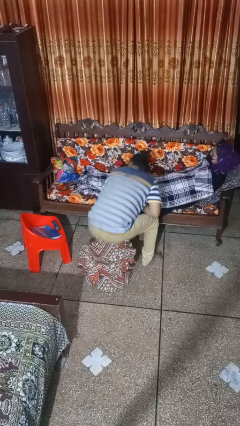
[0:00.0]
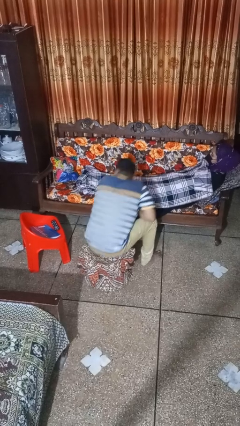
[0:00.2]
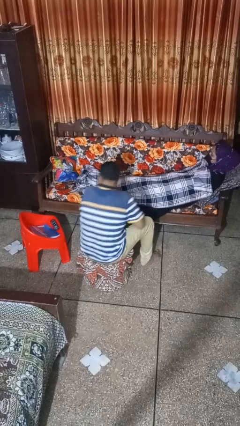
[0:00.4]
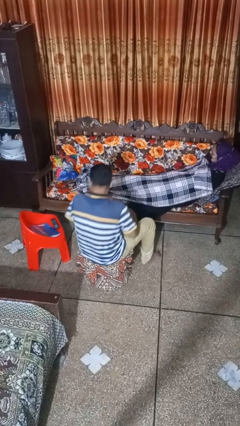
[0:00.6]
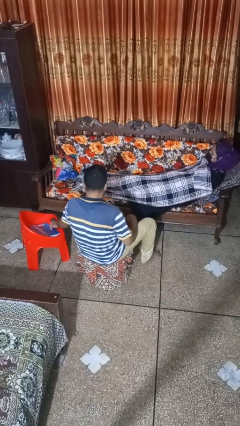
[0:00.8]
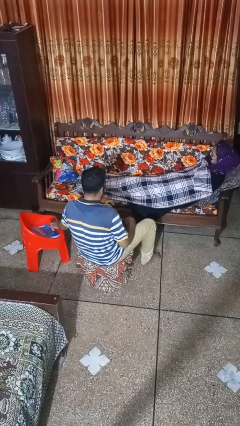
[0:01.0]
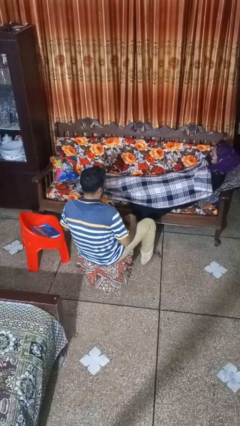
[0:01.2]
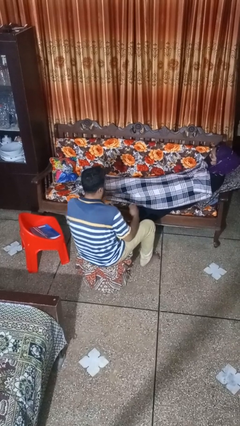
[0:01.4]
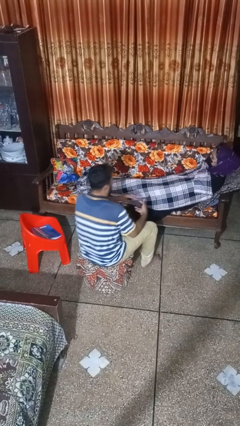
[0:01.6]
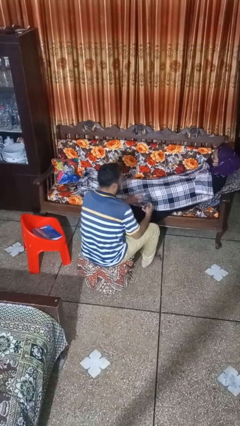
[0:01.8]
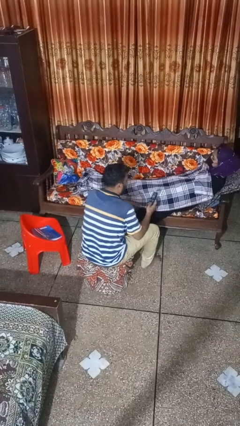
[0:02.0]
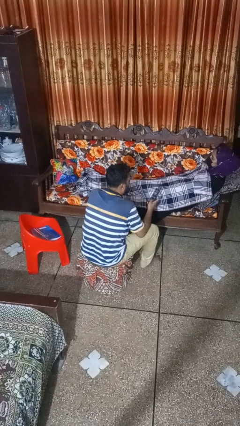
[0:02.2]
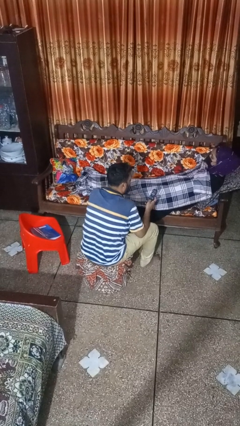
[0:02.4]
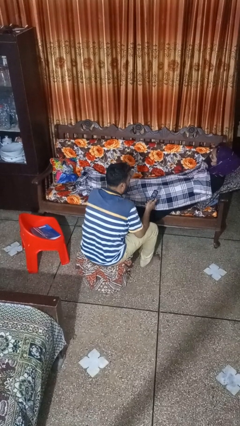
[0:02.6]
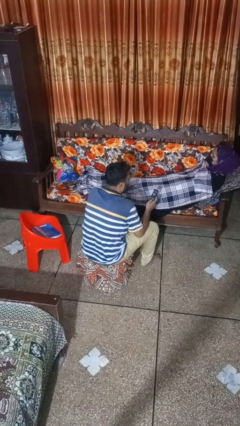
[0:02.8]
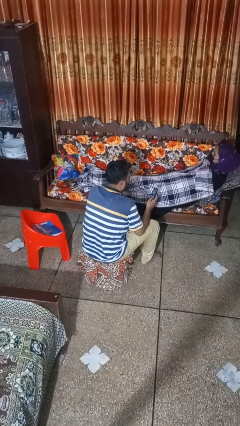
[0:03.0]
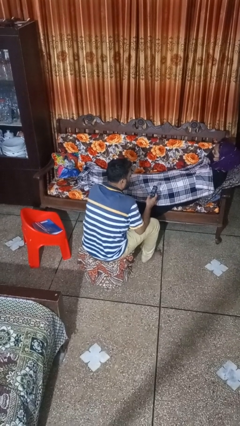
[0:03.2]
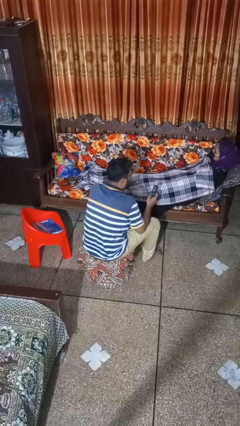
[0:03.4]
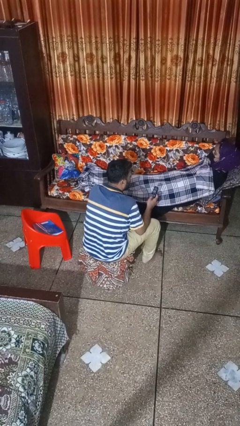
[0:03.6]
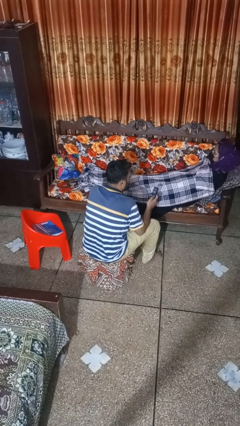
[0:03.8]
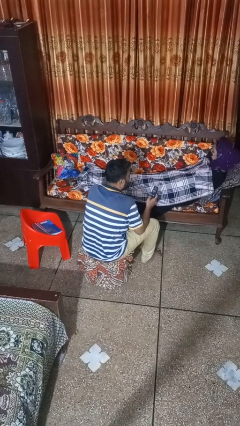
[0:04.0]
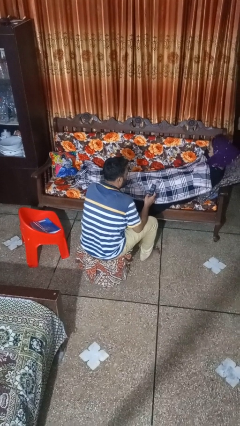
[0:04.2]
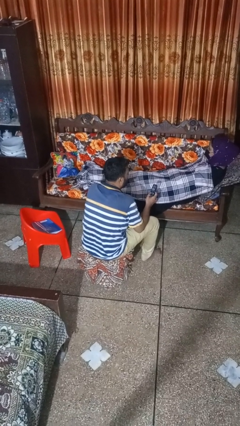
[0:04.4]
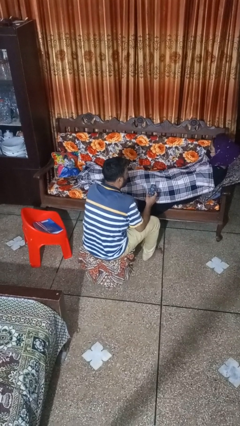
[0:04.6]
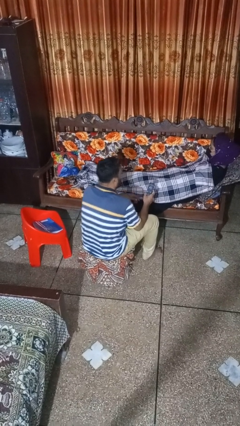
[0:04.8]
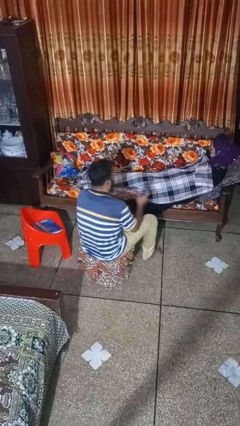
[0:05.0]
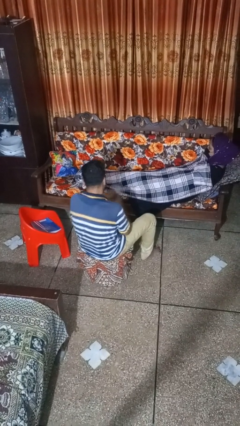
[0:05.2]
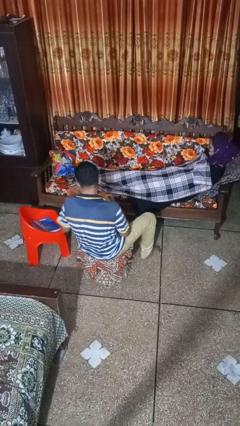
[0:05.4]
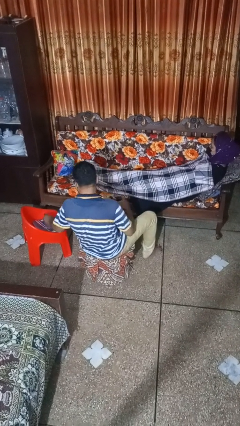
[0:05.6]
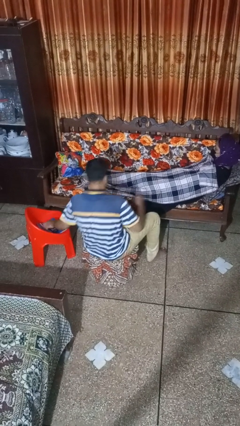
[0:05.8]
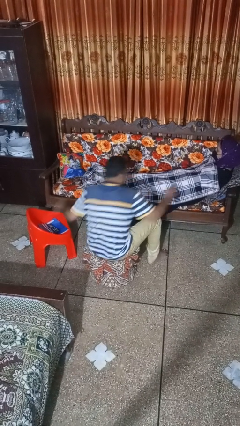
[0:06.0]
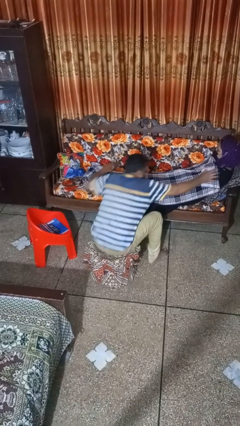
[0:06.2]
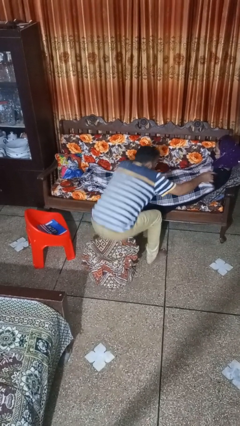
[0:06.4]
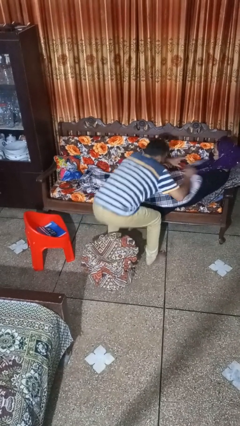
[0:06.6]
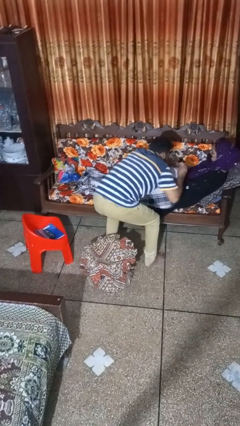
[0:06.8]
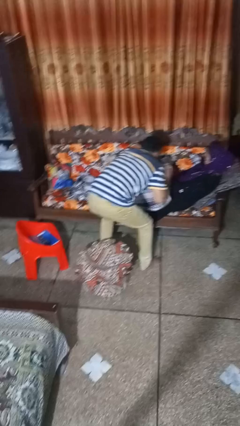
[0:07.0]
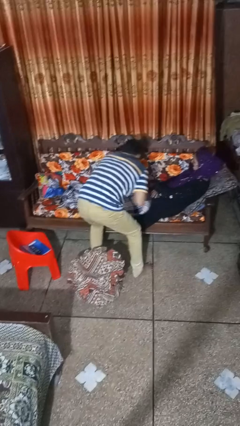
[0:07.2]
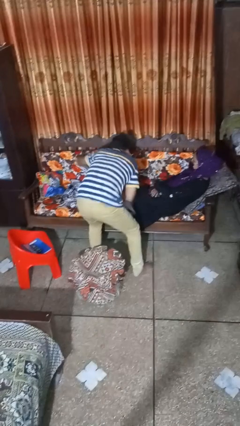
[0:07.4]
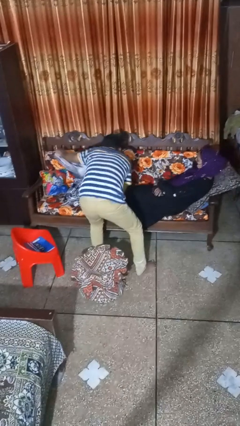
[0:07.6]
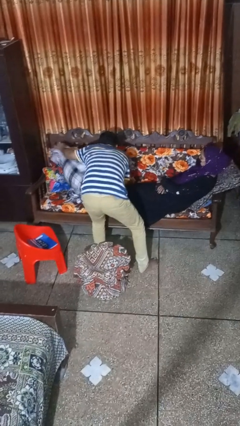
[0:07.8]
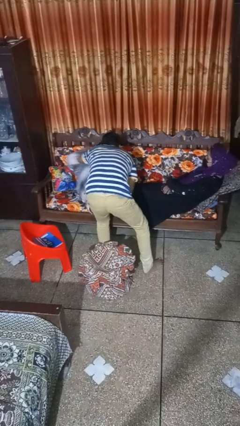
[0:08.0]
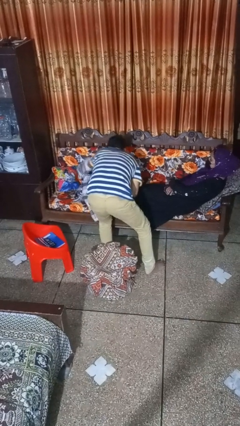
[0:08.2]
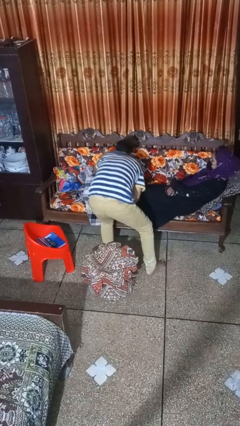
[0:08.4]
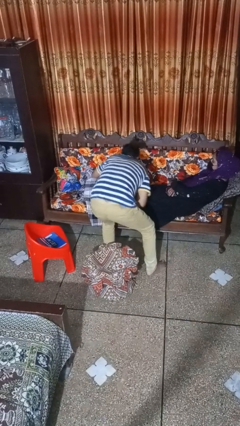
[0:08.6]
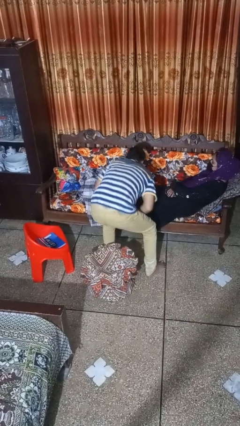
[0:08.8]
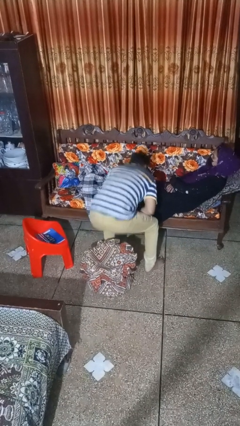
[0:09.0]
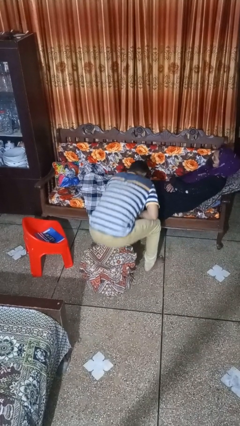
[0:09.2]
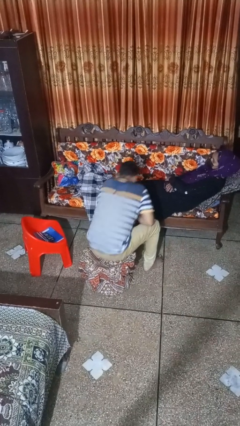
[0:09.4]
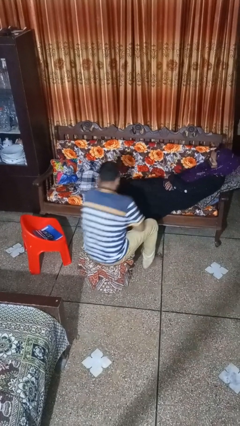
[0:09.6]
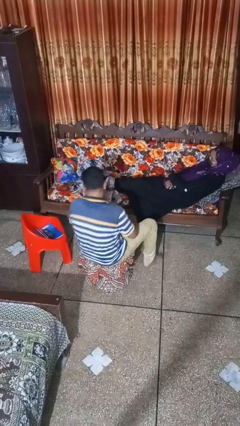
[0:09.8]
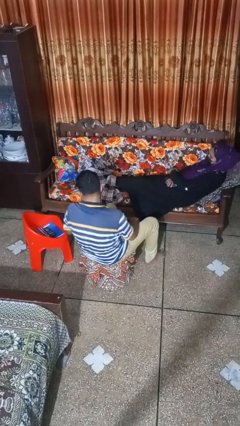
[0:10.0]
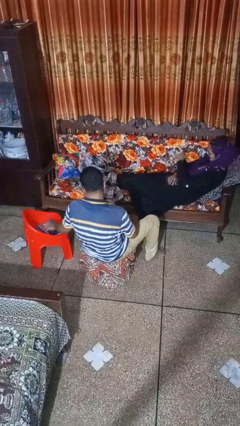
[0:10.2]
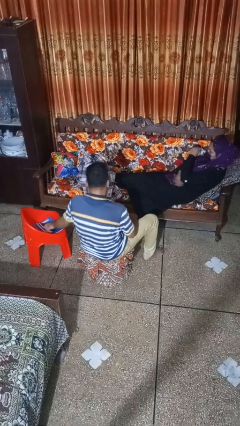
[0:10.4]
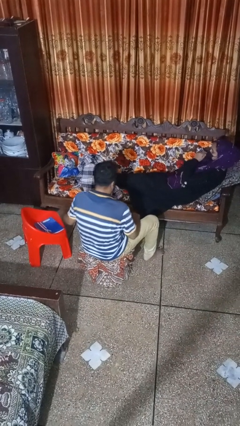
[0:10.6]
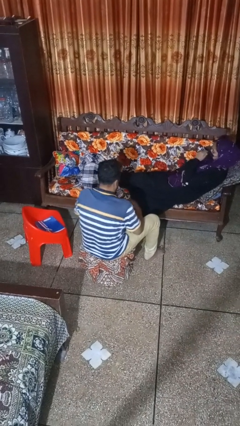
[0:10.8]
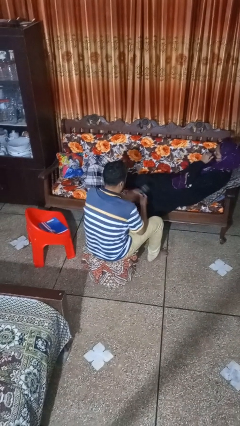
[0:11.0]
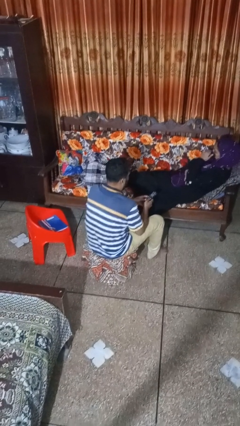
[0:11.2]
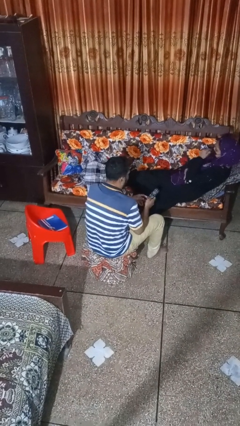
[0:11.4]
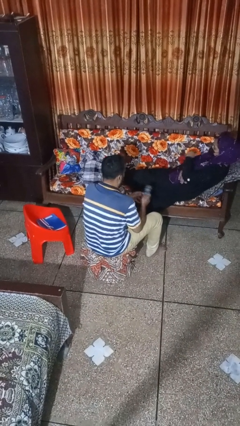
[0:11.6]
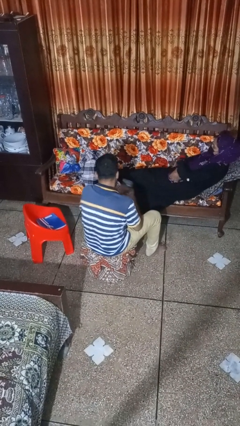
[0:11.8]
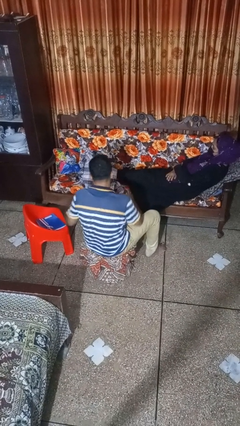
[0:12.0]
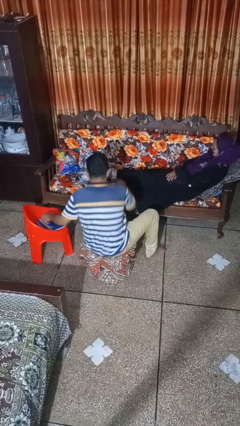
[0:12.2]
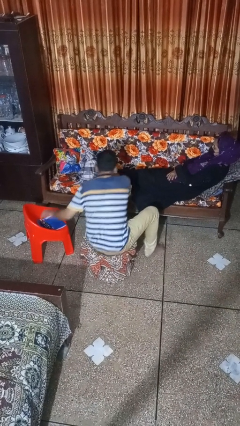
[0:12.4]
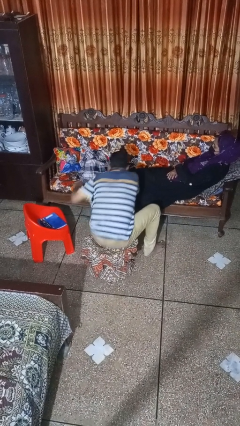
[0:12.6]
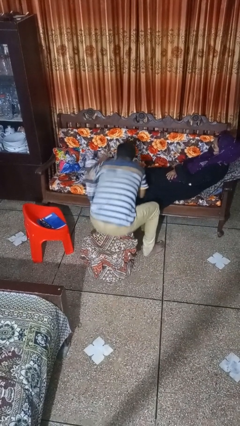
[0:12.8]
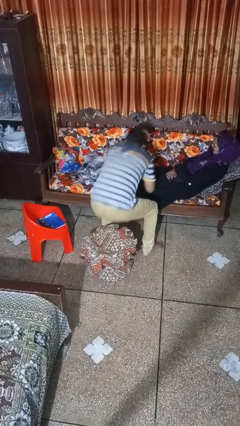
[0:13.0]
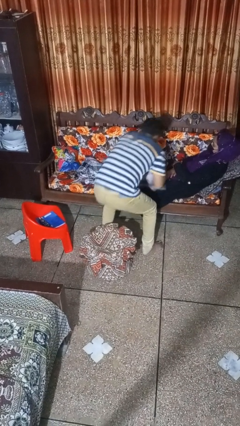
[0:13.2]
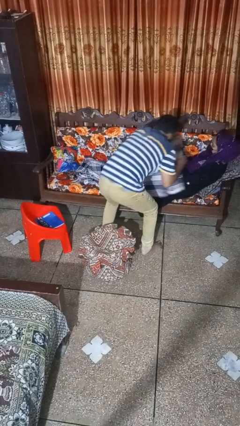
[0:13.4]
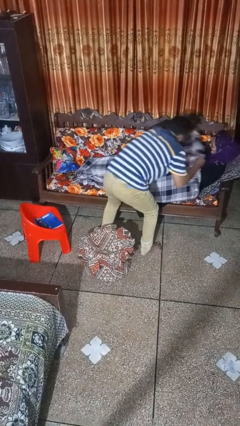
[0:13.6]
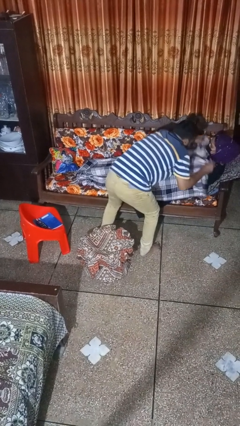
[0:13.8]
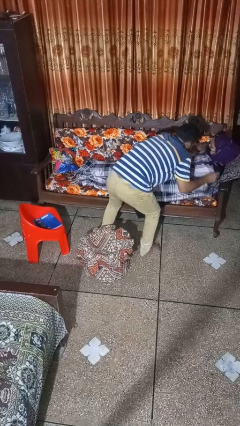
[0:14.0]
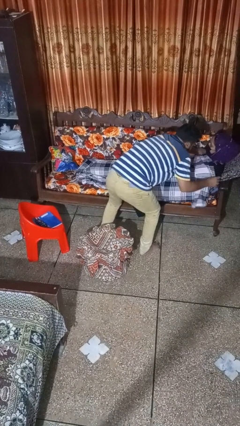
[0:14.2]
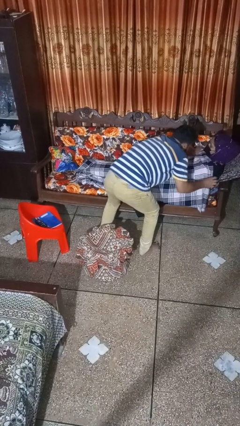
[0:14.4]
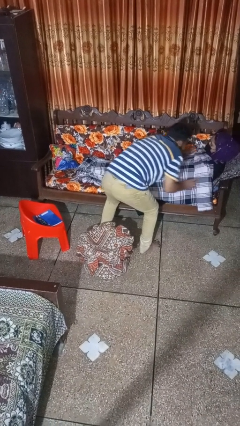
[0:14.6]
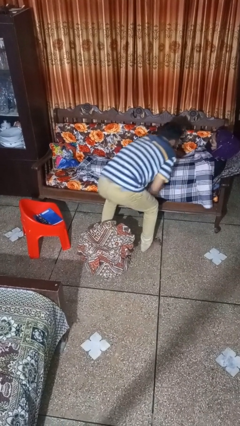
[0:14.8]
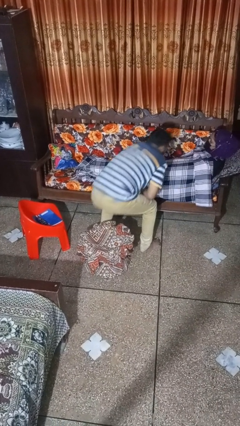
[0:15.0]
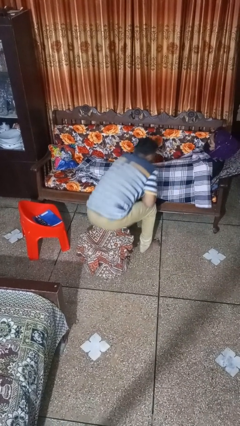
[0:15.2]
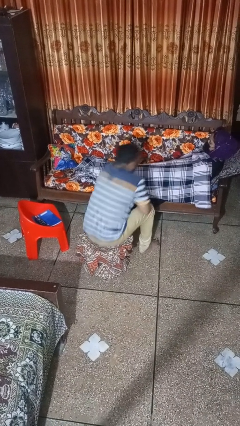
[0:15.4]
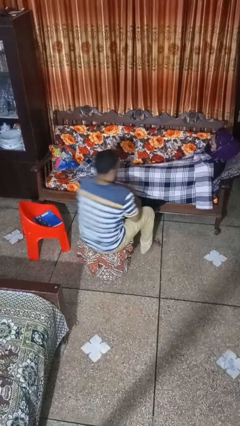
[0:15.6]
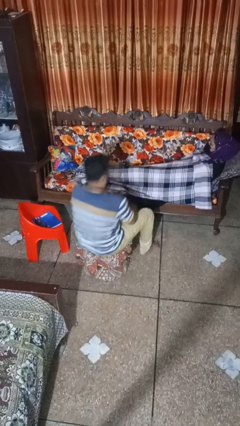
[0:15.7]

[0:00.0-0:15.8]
person uncovers friend with blanket

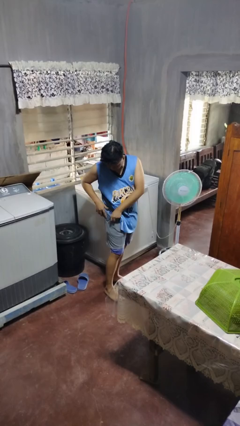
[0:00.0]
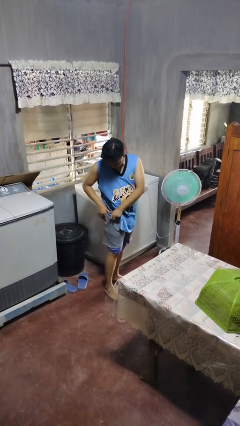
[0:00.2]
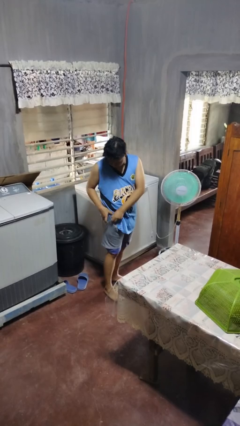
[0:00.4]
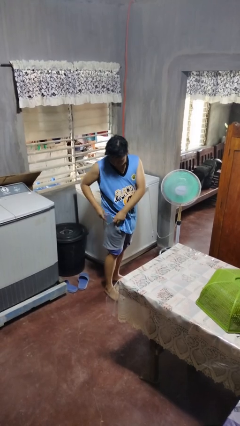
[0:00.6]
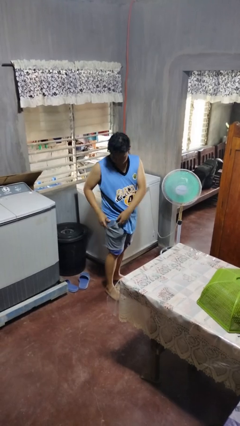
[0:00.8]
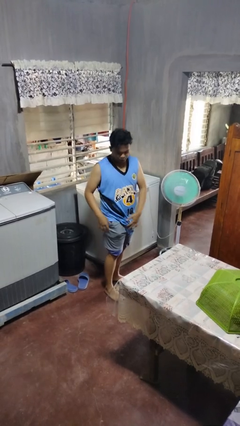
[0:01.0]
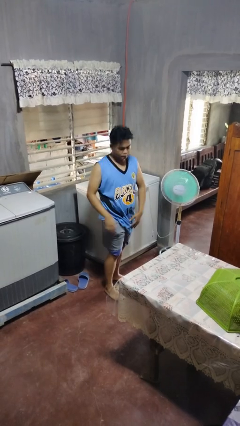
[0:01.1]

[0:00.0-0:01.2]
person puts phone into pocket

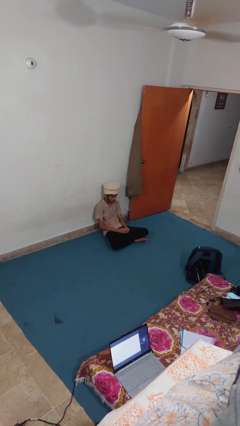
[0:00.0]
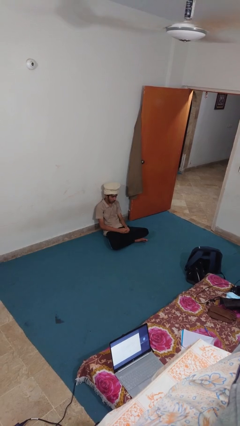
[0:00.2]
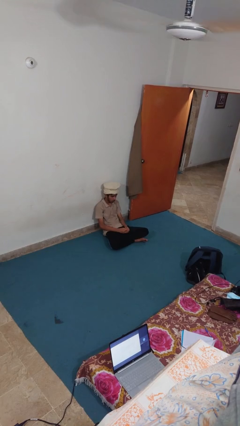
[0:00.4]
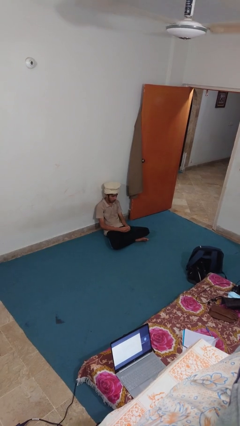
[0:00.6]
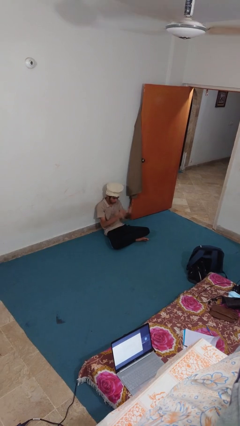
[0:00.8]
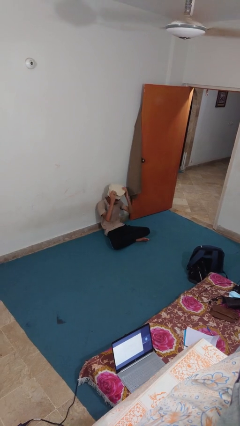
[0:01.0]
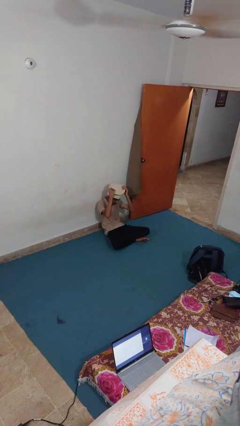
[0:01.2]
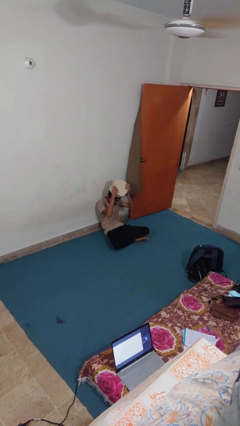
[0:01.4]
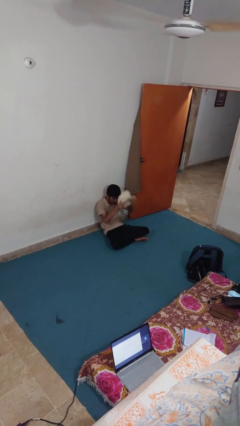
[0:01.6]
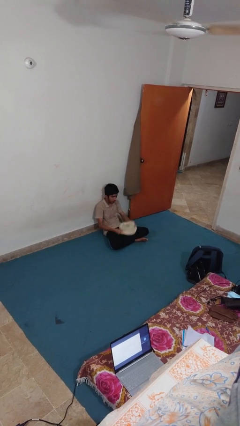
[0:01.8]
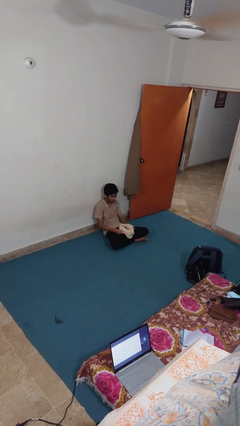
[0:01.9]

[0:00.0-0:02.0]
person takes off hat
